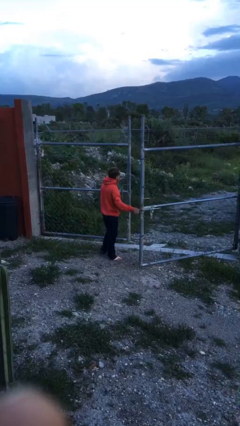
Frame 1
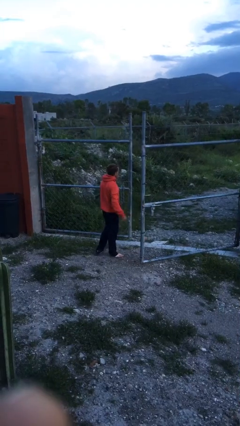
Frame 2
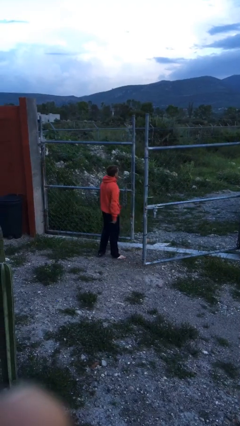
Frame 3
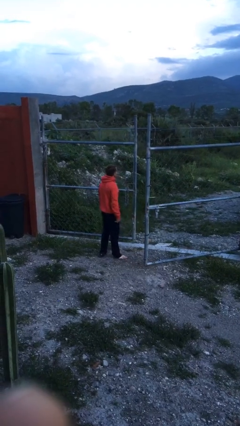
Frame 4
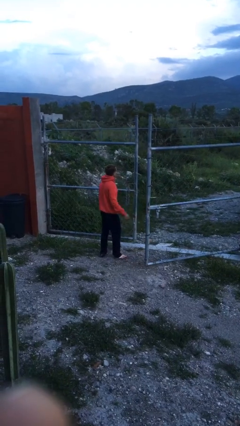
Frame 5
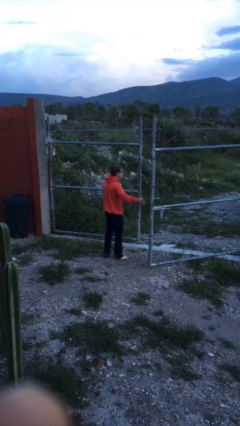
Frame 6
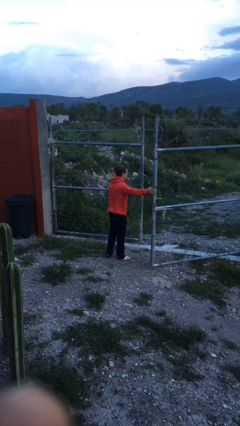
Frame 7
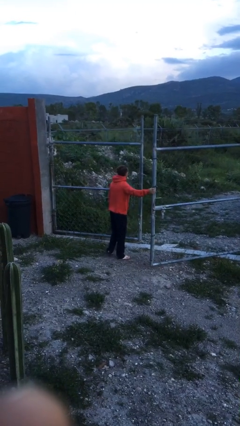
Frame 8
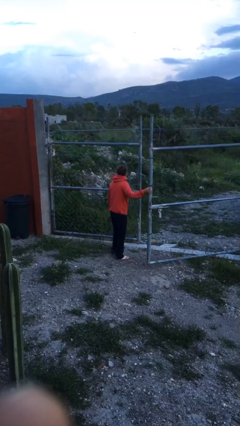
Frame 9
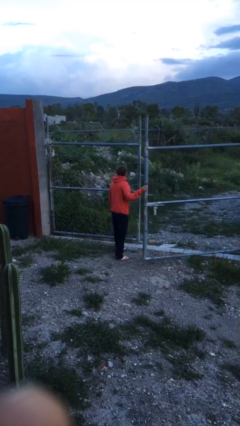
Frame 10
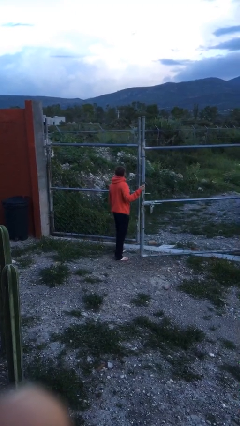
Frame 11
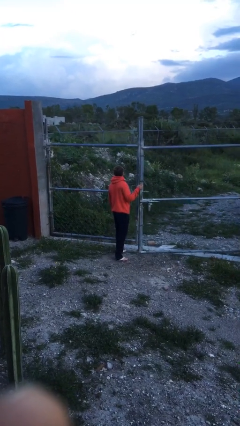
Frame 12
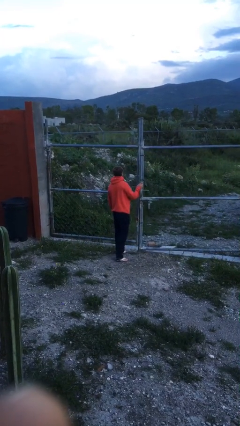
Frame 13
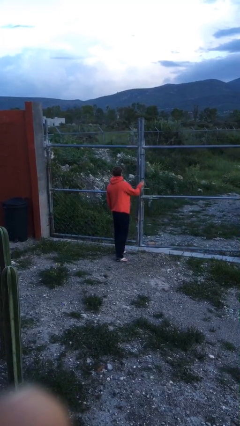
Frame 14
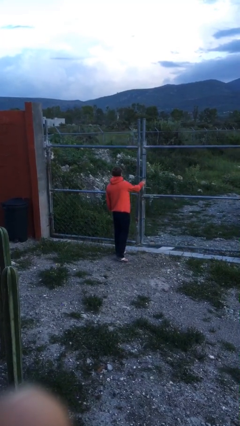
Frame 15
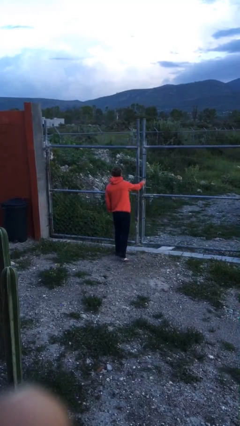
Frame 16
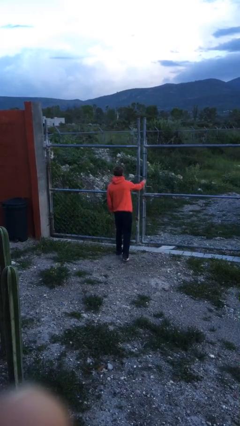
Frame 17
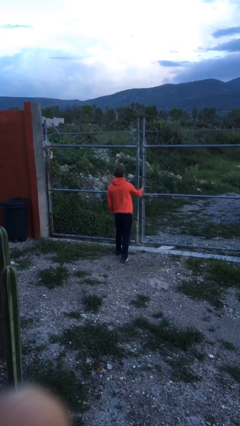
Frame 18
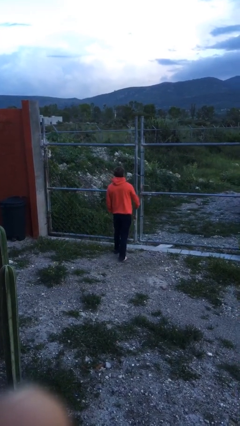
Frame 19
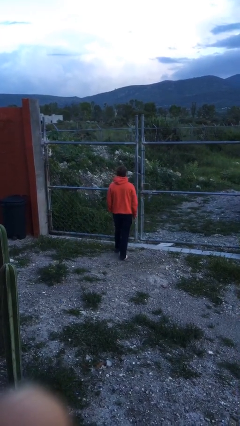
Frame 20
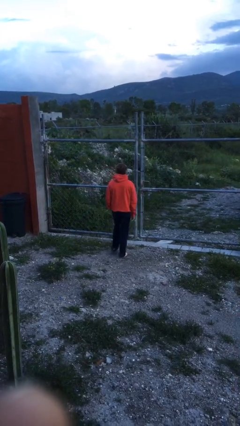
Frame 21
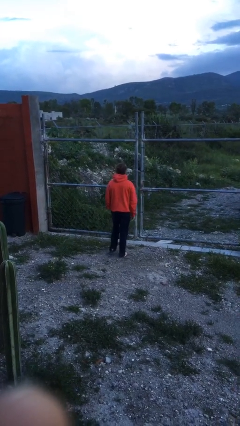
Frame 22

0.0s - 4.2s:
person closes gate

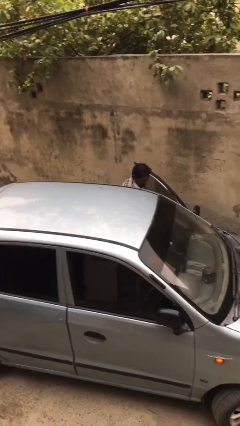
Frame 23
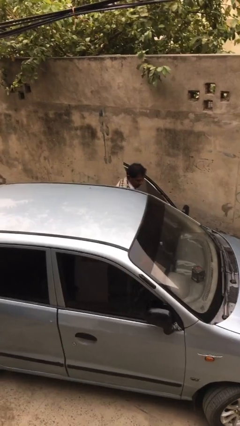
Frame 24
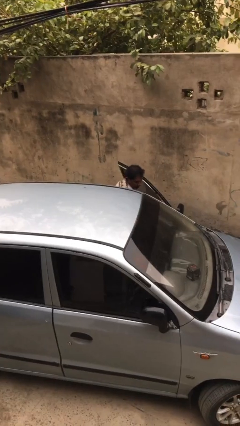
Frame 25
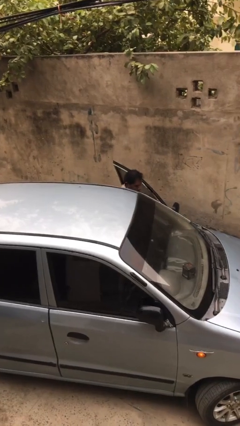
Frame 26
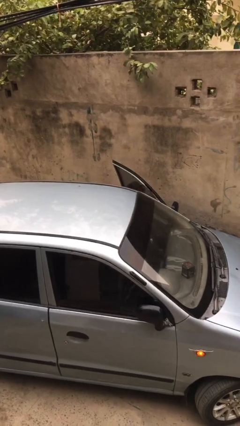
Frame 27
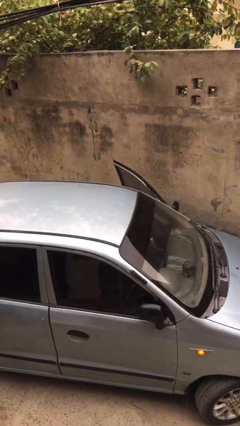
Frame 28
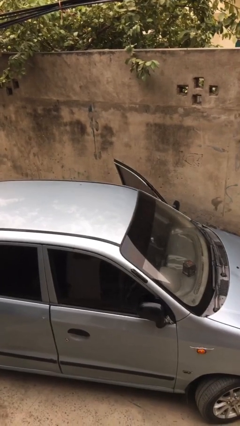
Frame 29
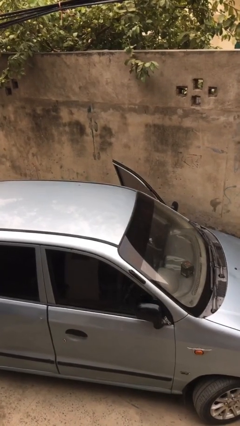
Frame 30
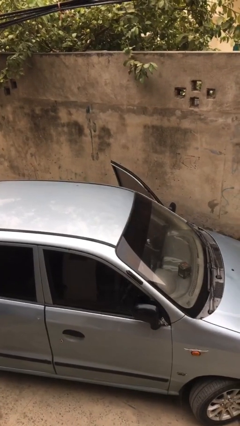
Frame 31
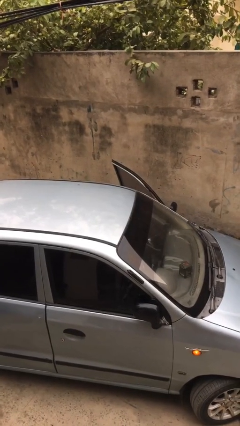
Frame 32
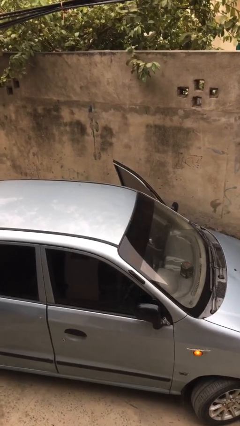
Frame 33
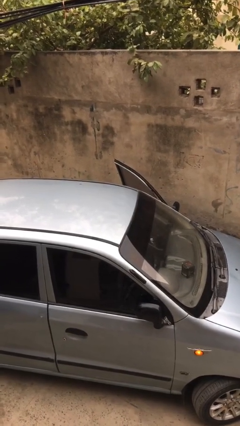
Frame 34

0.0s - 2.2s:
person enters car

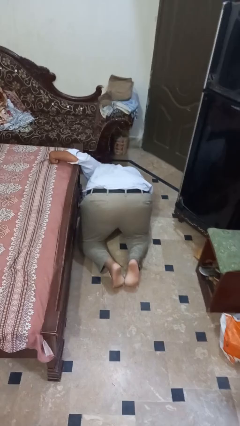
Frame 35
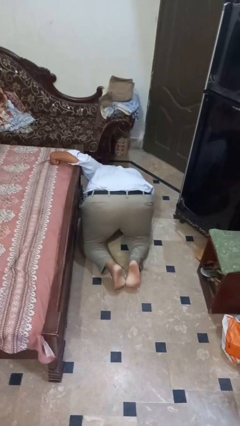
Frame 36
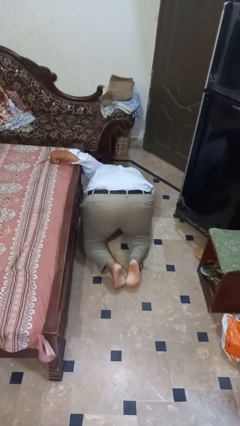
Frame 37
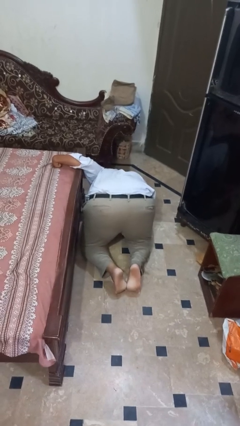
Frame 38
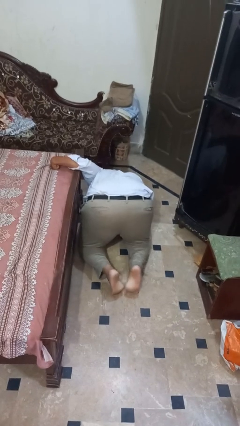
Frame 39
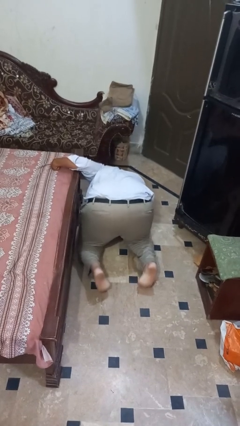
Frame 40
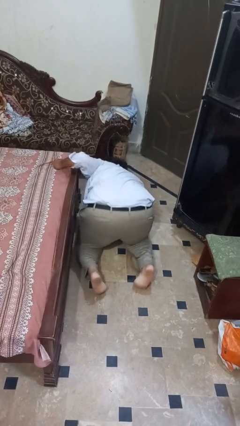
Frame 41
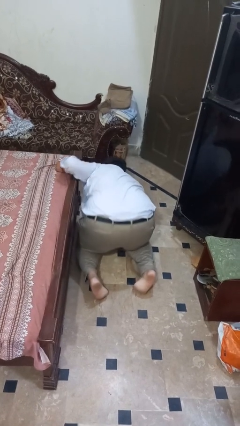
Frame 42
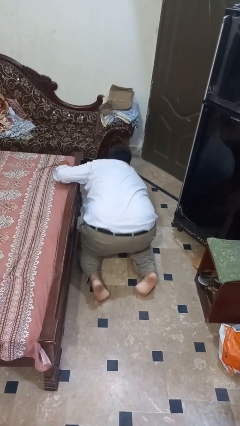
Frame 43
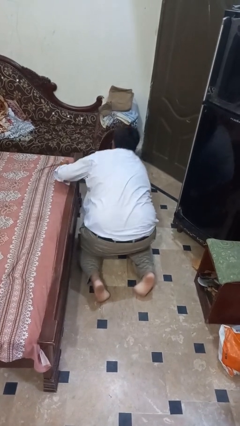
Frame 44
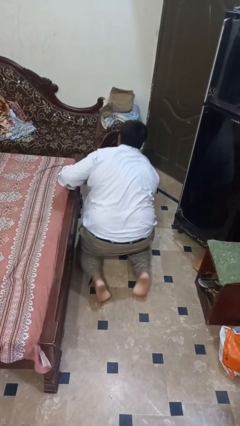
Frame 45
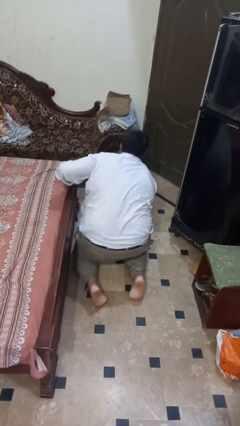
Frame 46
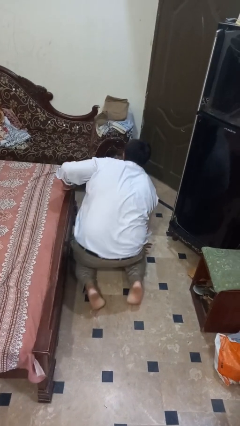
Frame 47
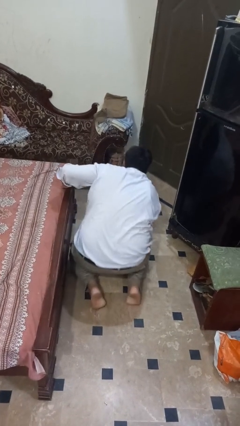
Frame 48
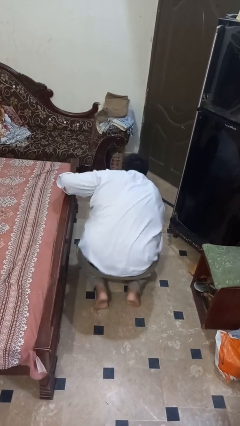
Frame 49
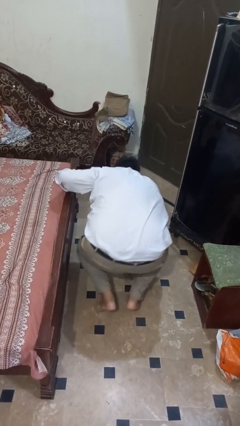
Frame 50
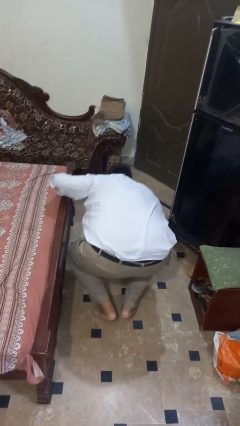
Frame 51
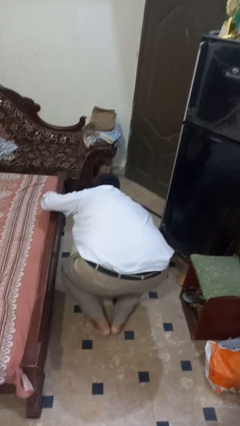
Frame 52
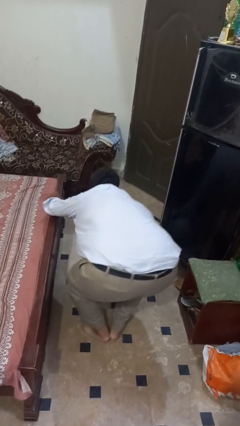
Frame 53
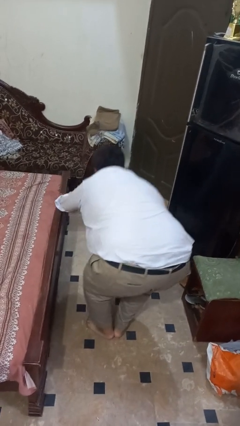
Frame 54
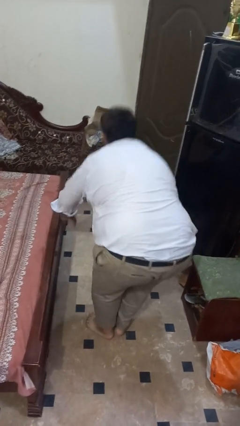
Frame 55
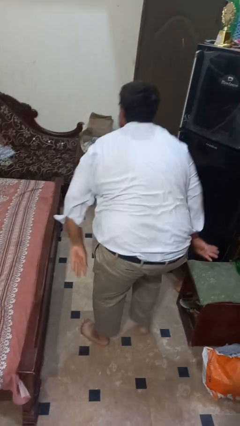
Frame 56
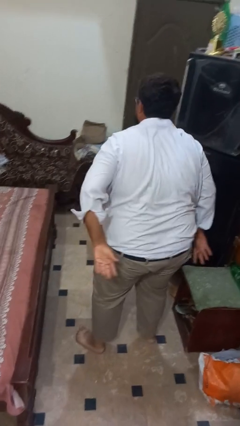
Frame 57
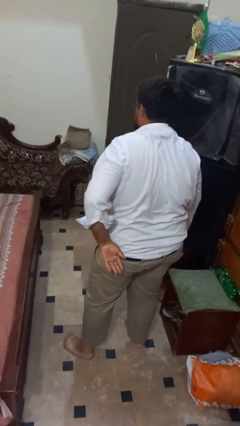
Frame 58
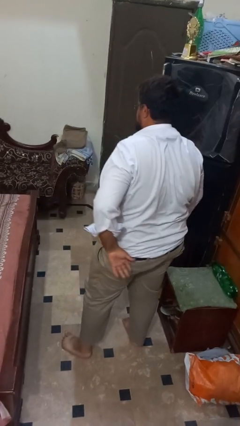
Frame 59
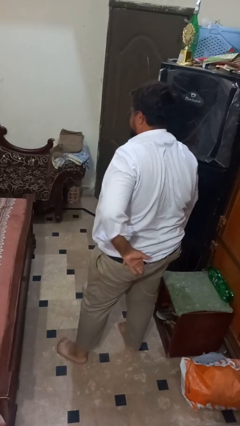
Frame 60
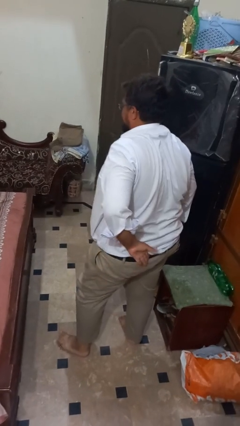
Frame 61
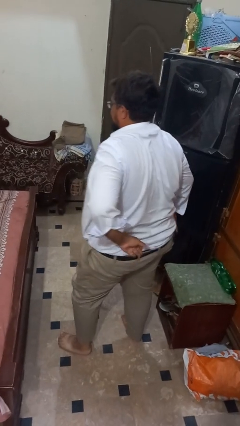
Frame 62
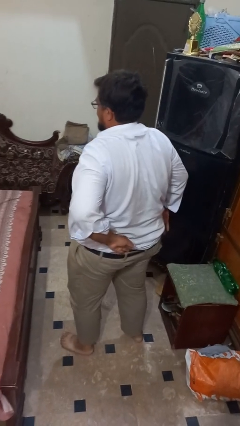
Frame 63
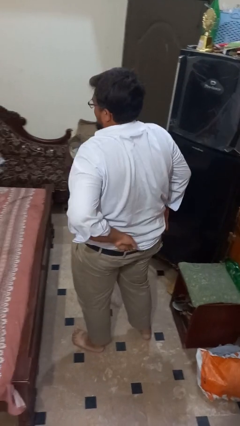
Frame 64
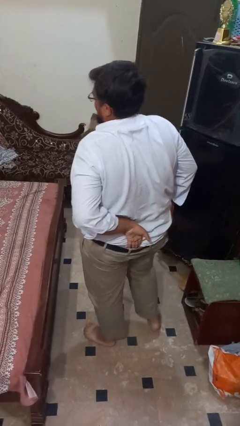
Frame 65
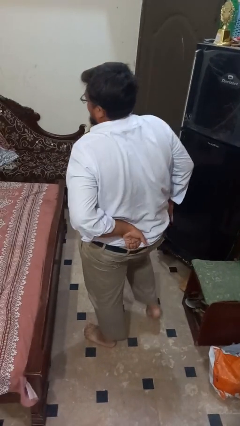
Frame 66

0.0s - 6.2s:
person stands up from floor

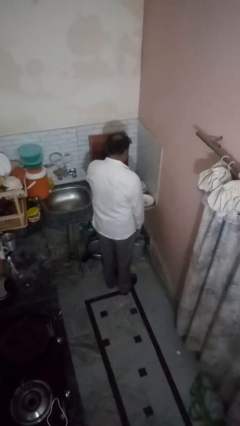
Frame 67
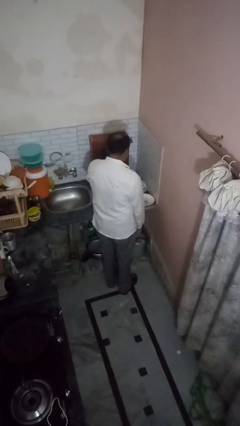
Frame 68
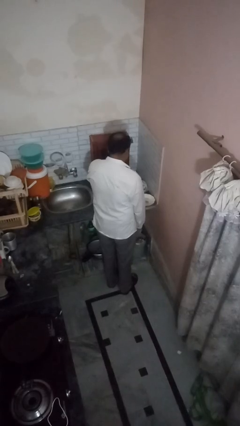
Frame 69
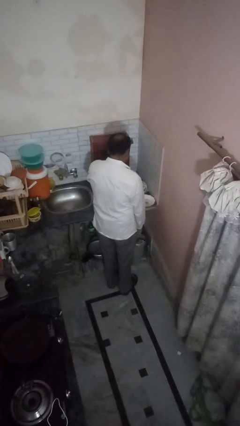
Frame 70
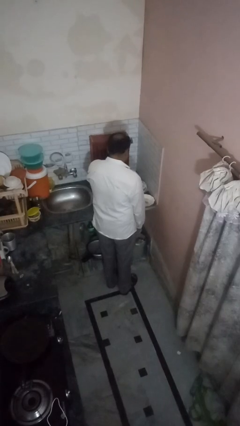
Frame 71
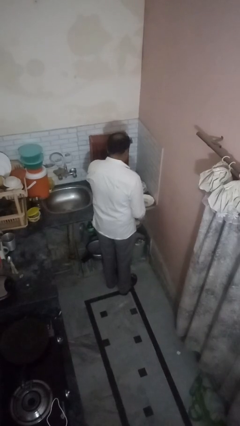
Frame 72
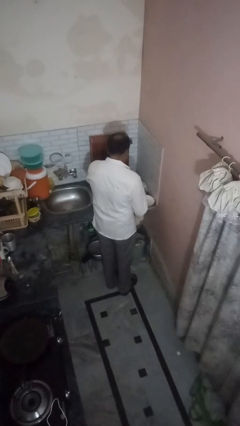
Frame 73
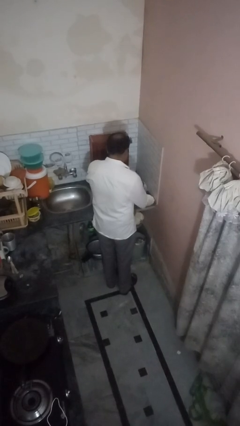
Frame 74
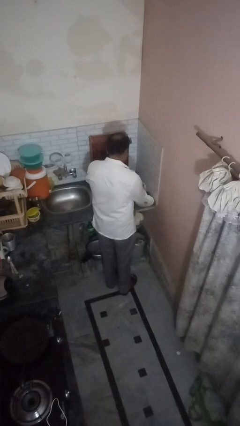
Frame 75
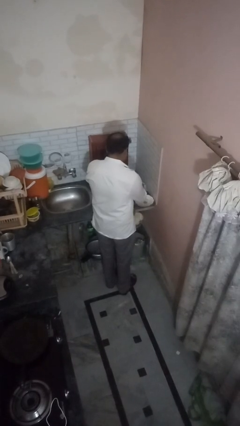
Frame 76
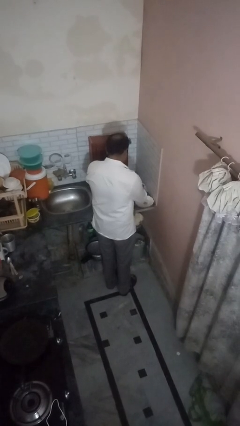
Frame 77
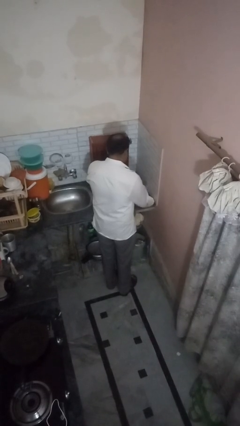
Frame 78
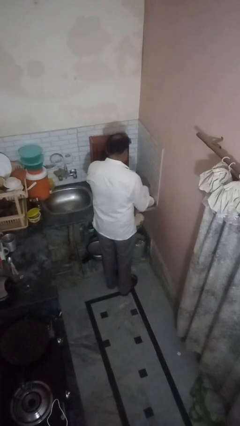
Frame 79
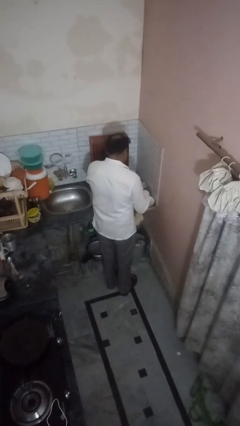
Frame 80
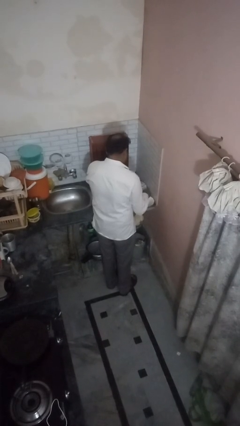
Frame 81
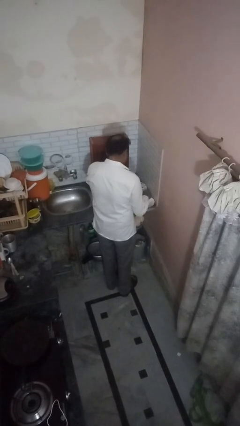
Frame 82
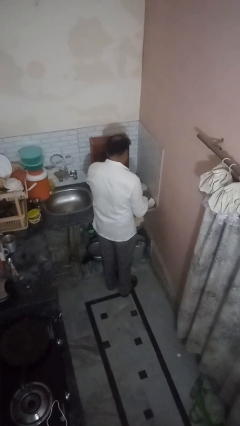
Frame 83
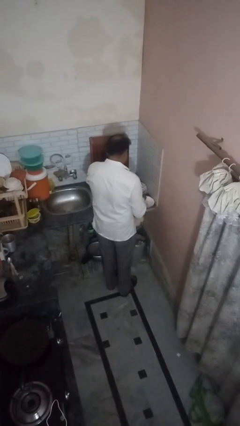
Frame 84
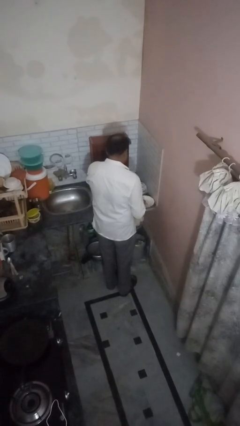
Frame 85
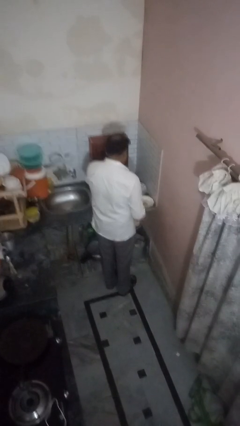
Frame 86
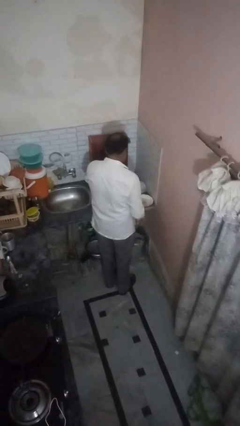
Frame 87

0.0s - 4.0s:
person pours into bowl

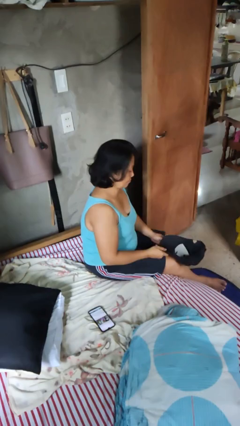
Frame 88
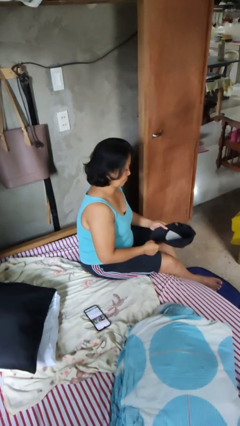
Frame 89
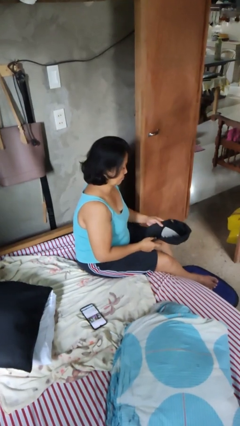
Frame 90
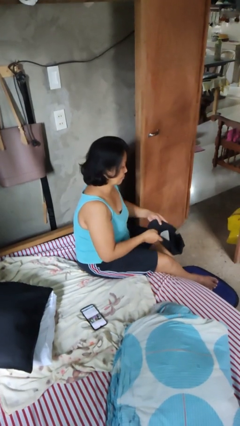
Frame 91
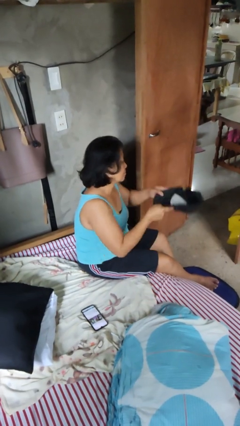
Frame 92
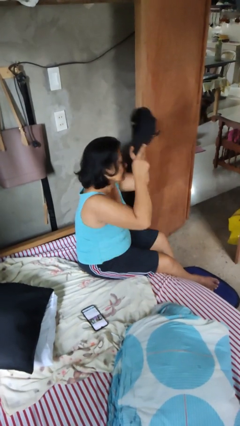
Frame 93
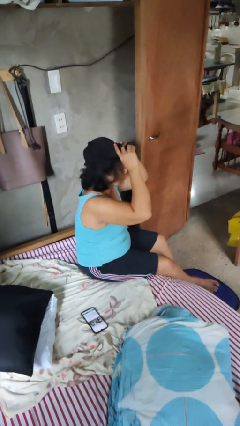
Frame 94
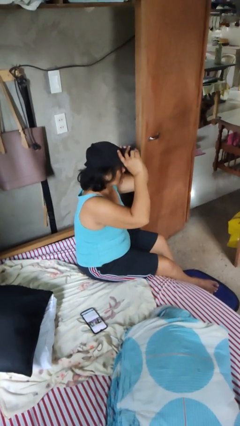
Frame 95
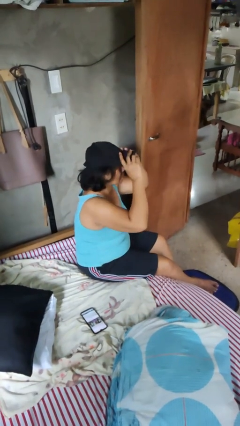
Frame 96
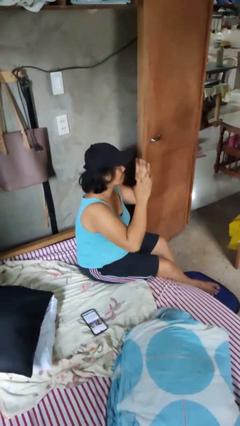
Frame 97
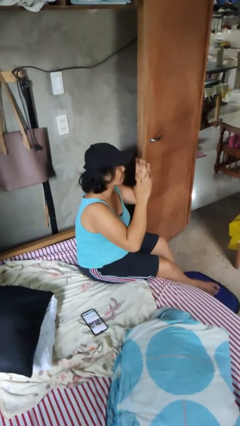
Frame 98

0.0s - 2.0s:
person puts on hat
